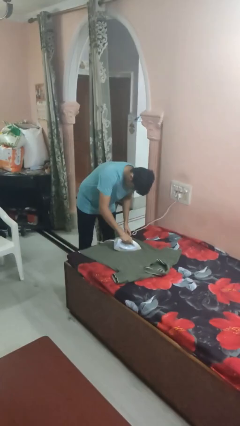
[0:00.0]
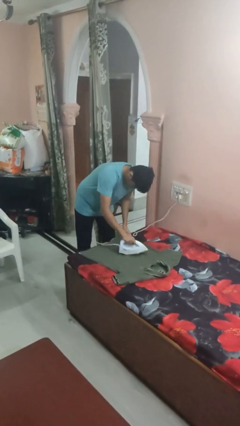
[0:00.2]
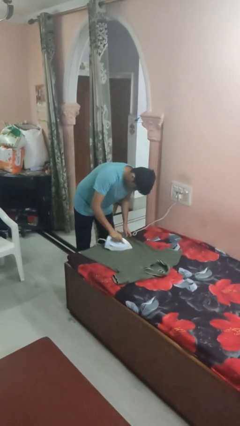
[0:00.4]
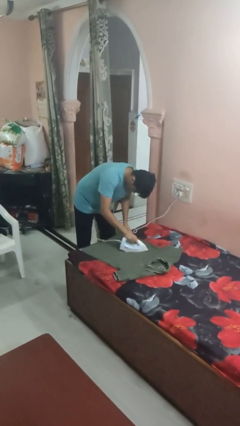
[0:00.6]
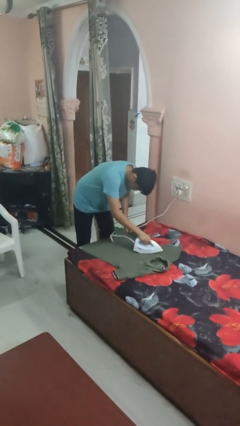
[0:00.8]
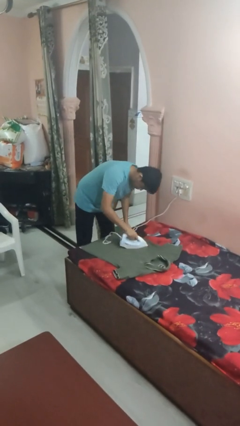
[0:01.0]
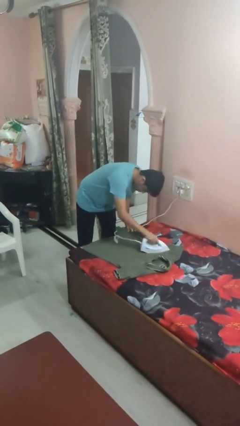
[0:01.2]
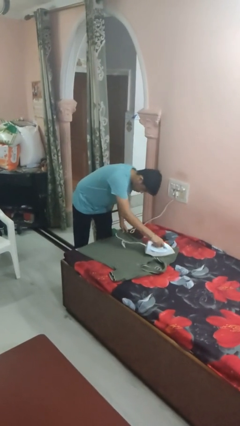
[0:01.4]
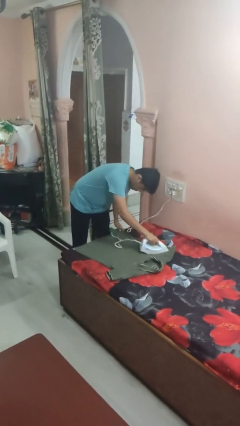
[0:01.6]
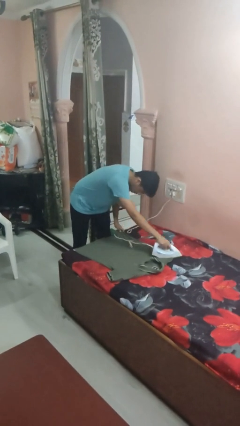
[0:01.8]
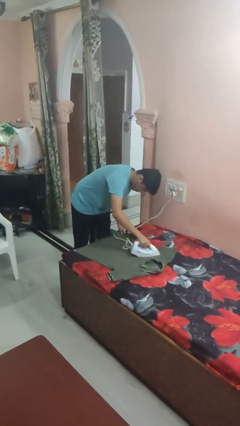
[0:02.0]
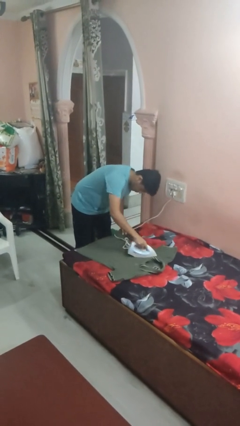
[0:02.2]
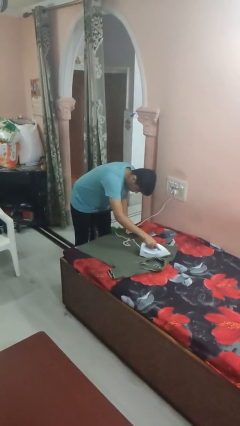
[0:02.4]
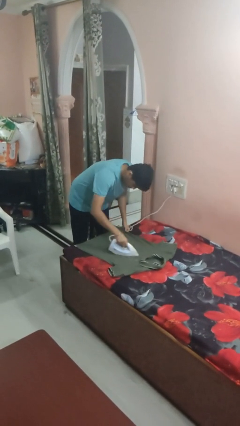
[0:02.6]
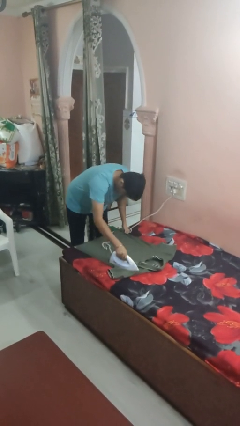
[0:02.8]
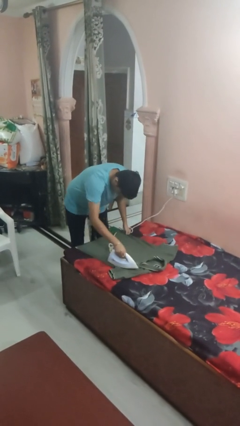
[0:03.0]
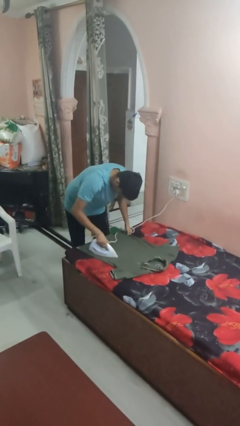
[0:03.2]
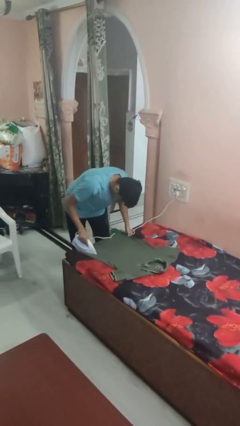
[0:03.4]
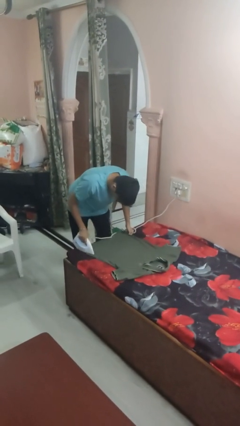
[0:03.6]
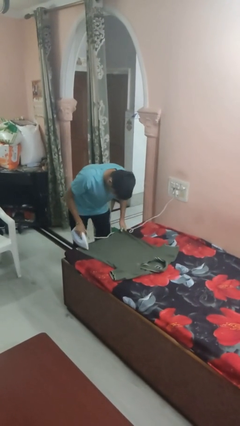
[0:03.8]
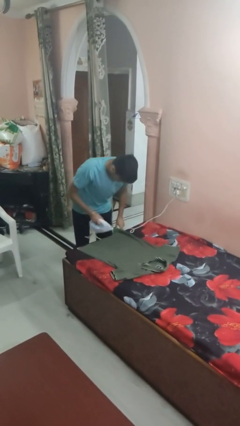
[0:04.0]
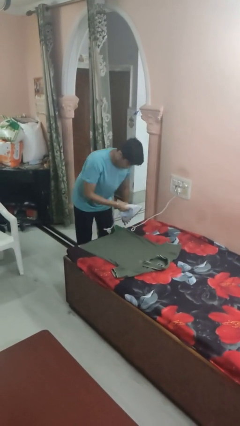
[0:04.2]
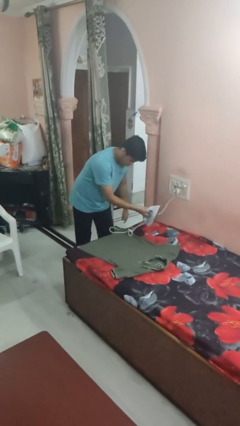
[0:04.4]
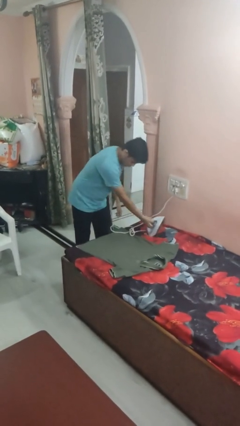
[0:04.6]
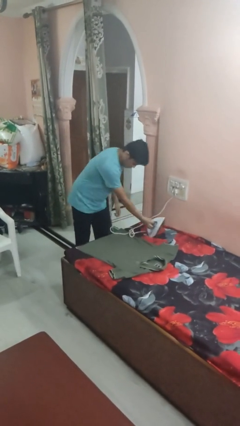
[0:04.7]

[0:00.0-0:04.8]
person irons clothes

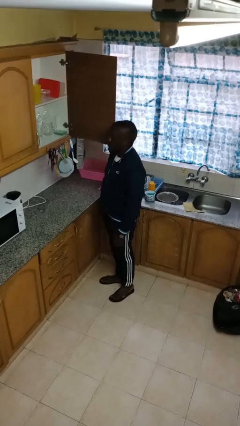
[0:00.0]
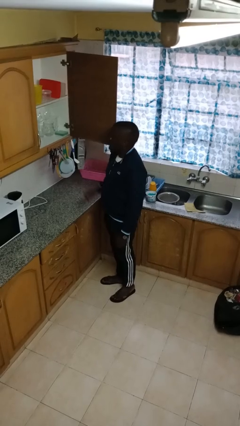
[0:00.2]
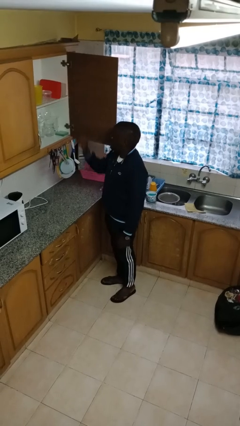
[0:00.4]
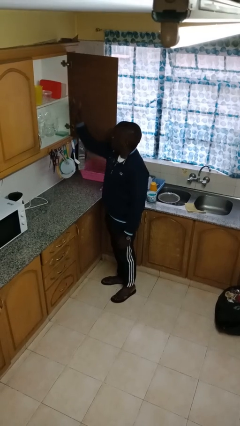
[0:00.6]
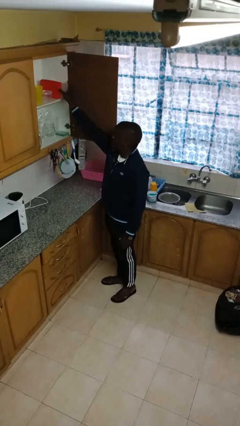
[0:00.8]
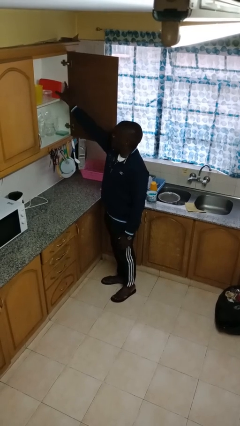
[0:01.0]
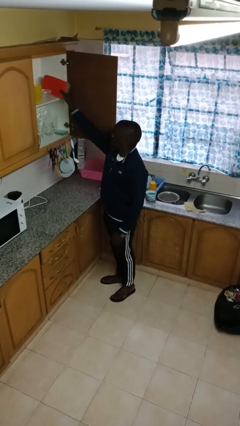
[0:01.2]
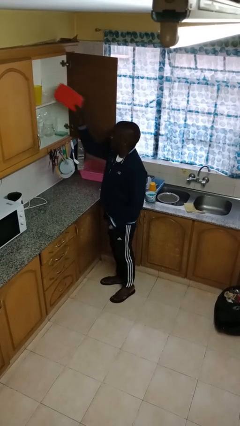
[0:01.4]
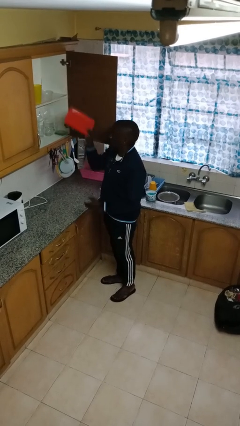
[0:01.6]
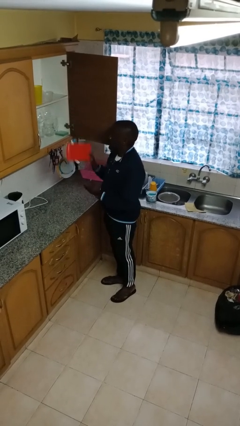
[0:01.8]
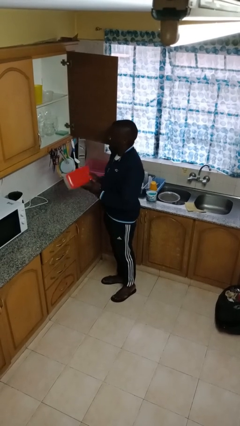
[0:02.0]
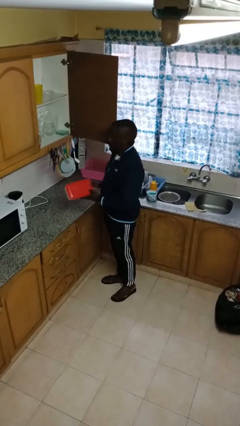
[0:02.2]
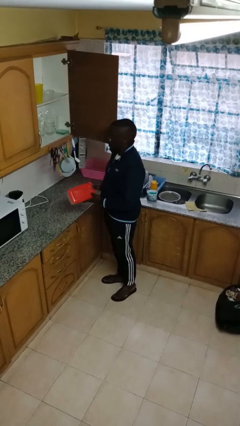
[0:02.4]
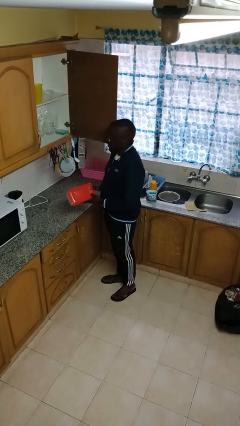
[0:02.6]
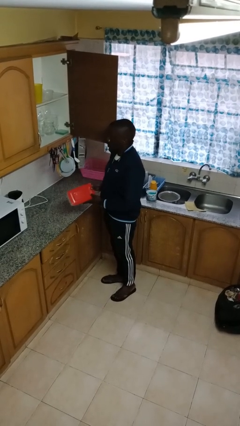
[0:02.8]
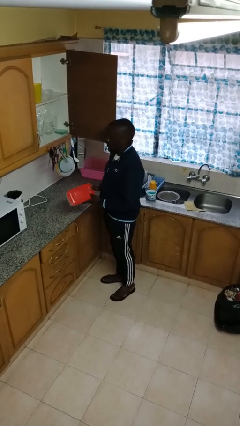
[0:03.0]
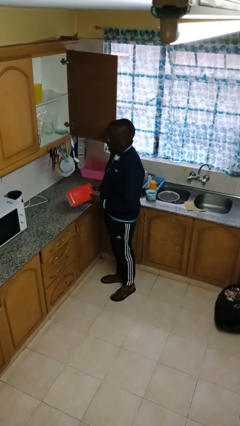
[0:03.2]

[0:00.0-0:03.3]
person picks up object from shelf

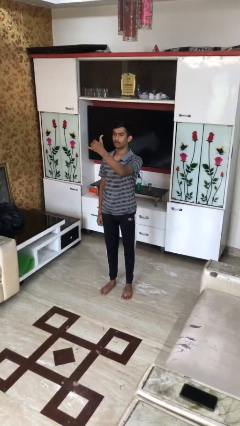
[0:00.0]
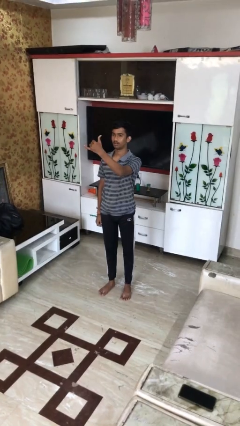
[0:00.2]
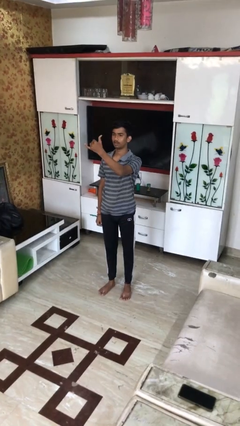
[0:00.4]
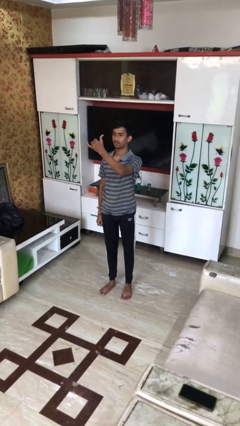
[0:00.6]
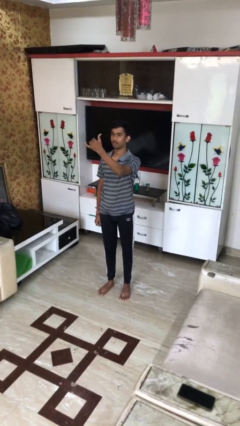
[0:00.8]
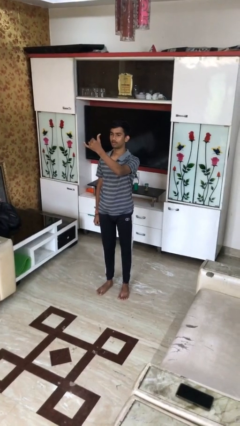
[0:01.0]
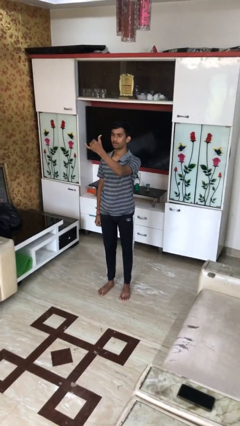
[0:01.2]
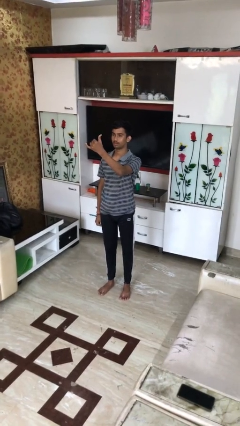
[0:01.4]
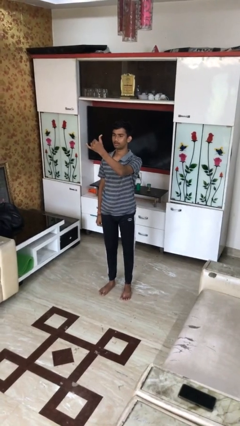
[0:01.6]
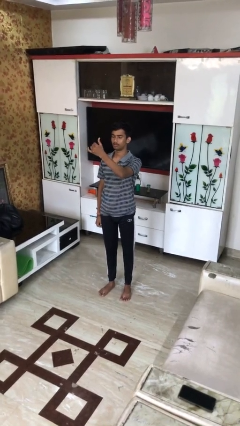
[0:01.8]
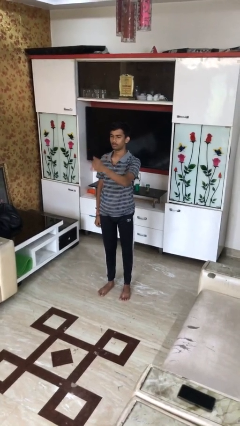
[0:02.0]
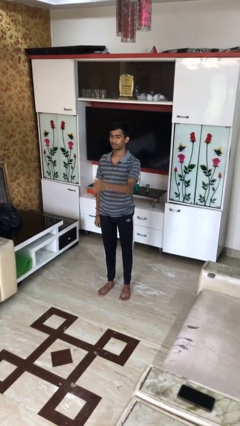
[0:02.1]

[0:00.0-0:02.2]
person gestures hang loose

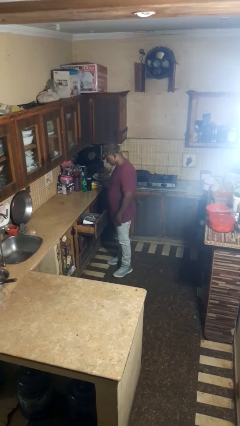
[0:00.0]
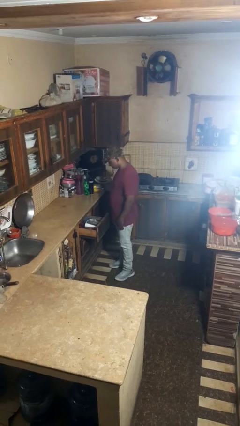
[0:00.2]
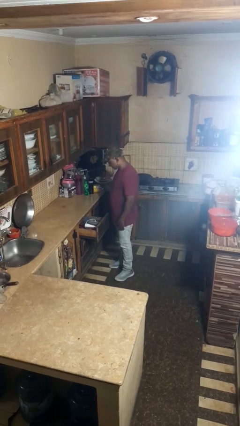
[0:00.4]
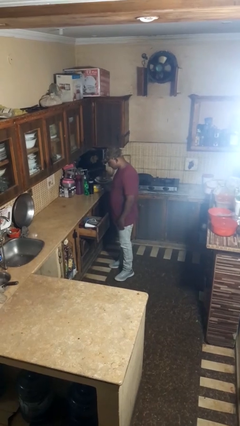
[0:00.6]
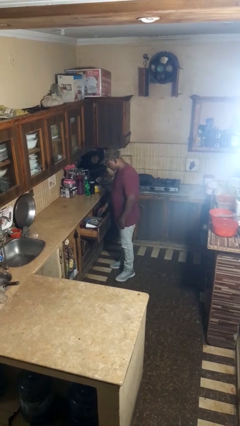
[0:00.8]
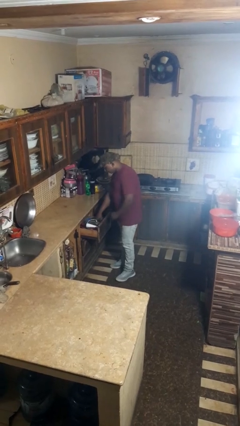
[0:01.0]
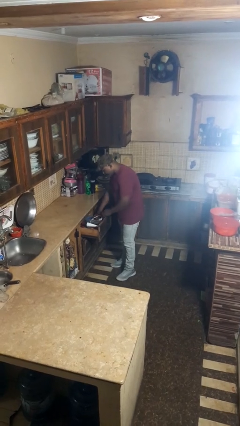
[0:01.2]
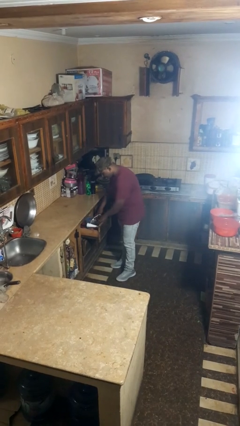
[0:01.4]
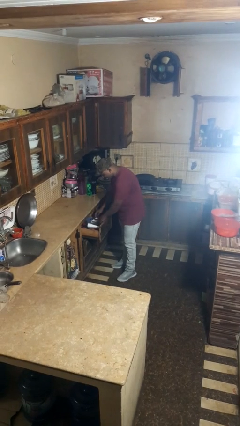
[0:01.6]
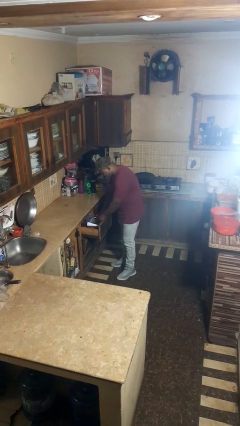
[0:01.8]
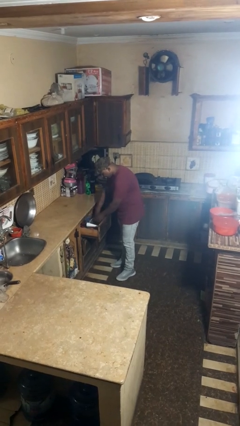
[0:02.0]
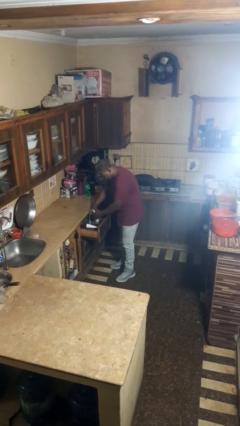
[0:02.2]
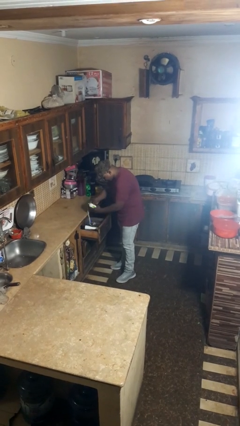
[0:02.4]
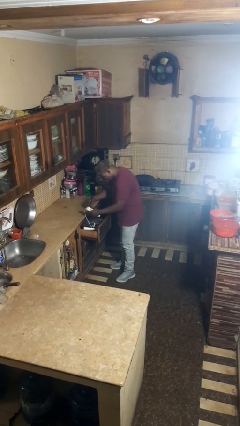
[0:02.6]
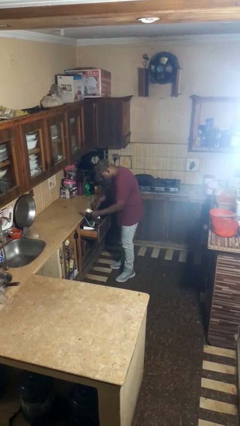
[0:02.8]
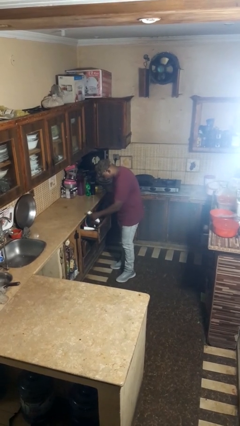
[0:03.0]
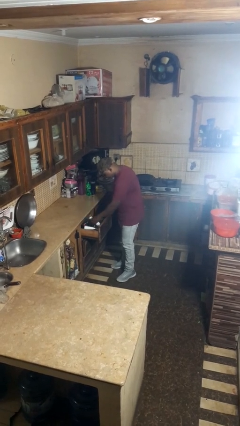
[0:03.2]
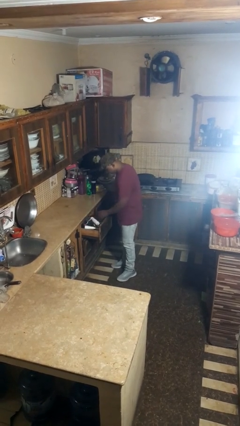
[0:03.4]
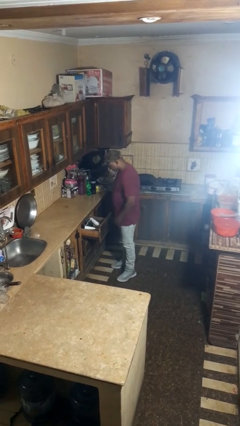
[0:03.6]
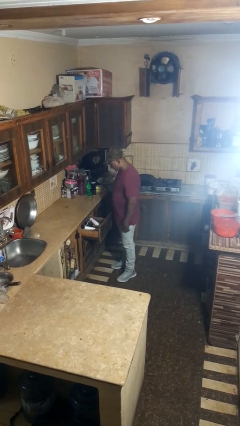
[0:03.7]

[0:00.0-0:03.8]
person searches in kitchen drawer

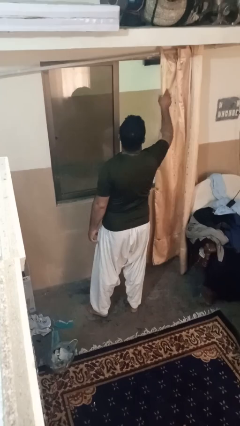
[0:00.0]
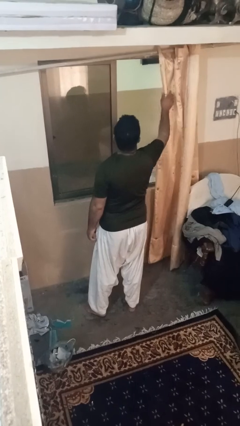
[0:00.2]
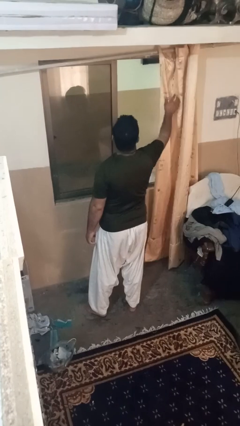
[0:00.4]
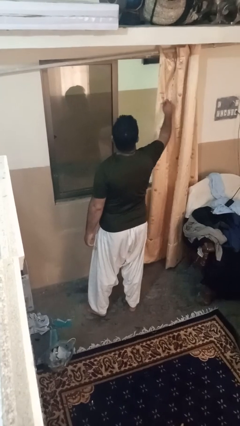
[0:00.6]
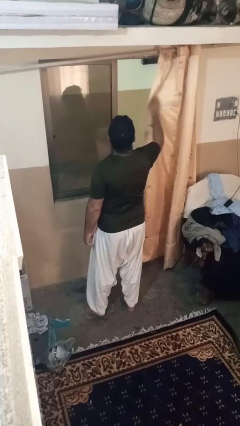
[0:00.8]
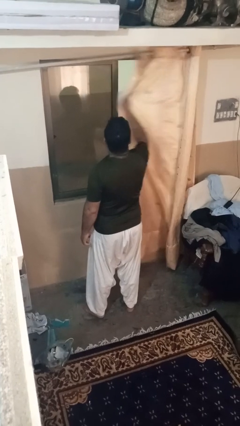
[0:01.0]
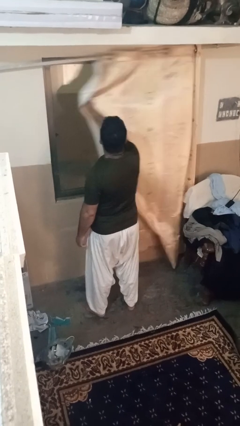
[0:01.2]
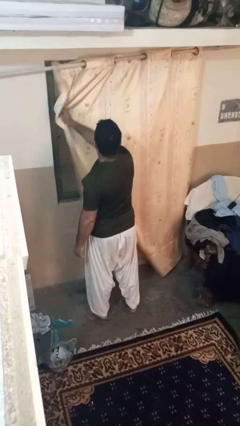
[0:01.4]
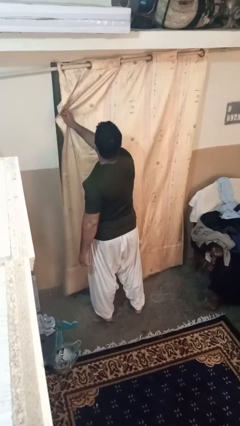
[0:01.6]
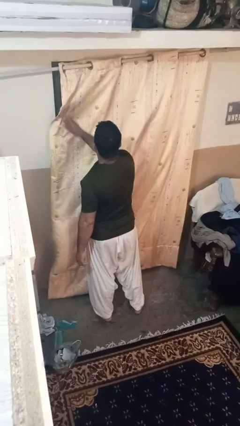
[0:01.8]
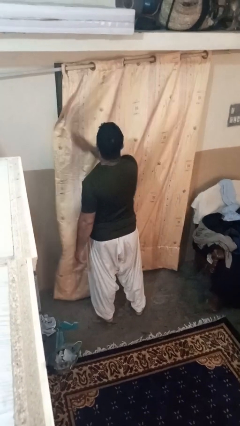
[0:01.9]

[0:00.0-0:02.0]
person closes curtains

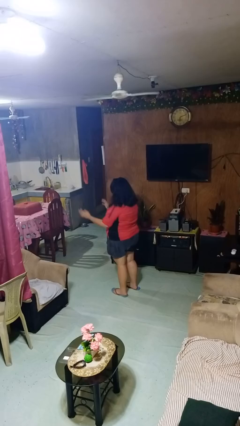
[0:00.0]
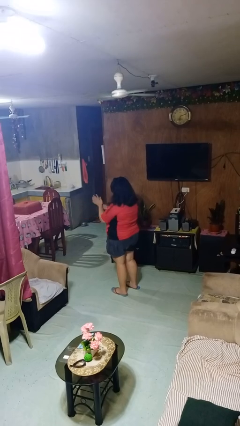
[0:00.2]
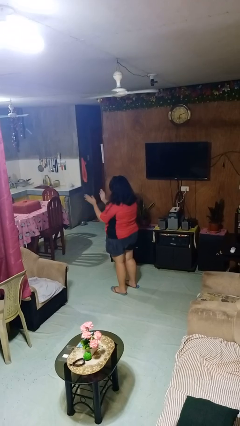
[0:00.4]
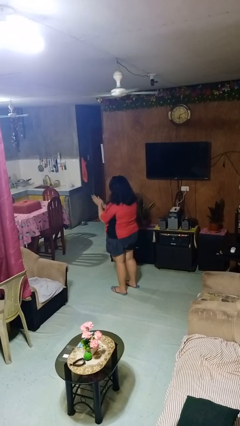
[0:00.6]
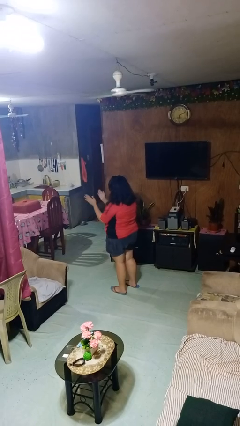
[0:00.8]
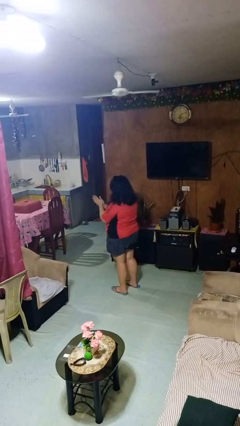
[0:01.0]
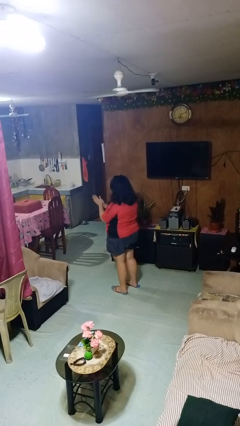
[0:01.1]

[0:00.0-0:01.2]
person claps hands
